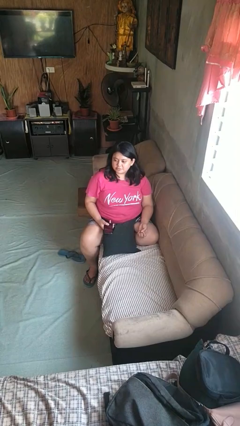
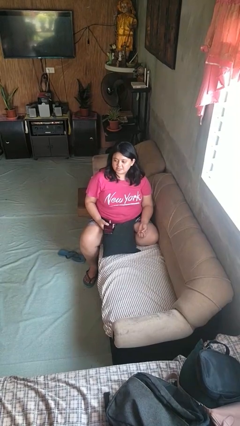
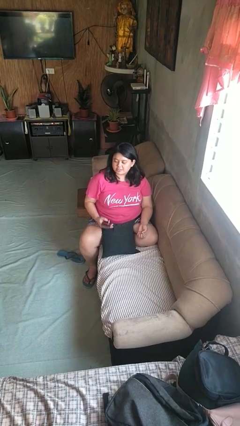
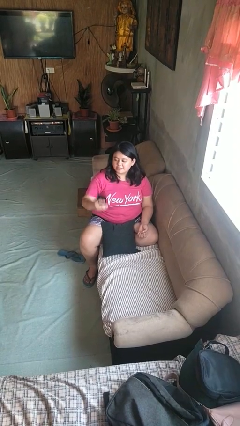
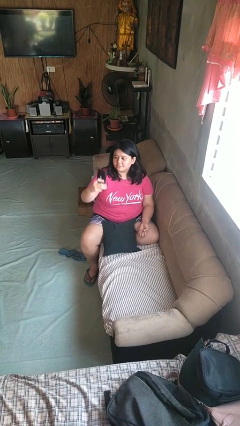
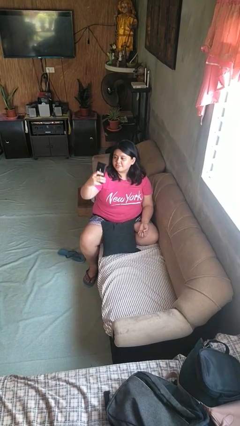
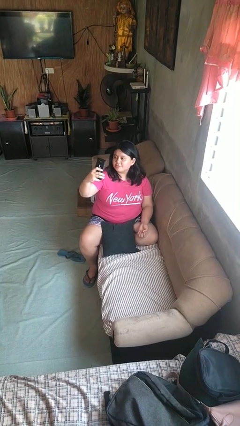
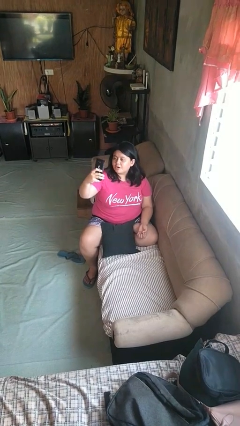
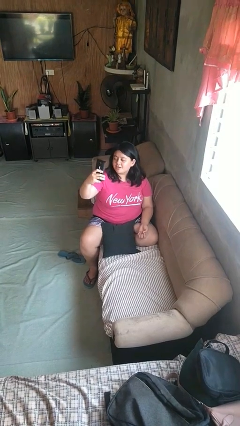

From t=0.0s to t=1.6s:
person takes selfie

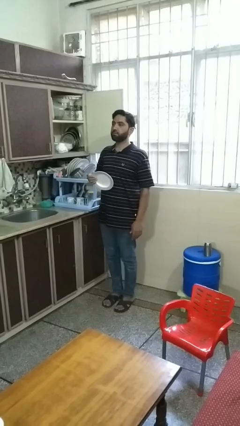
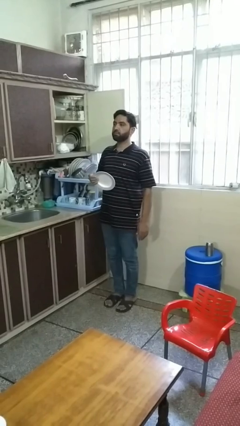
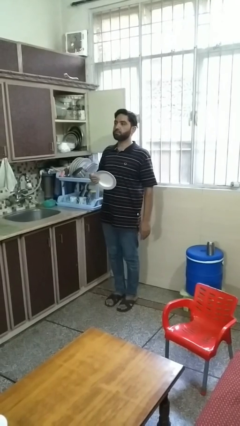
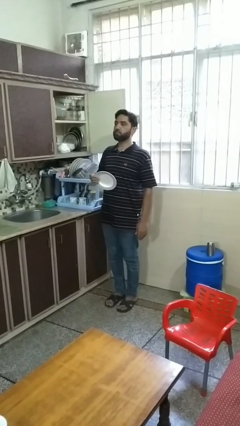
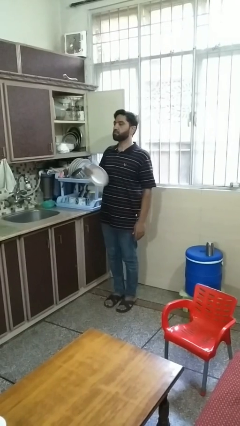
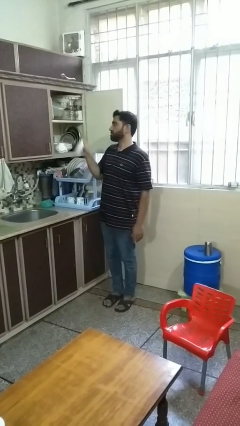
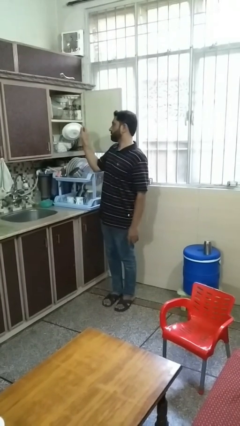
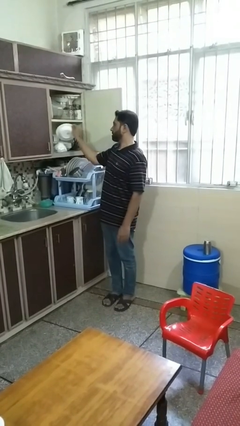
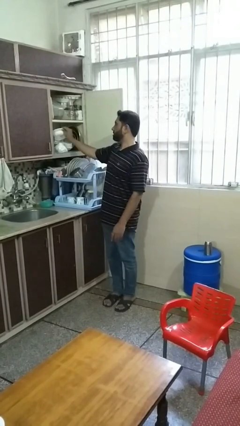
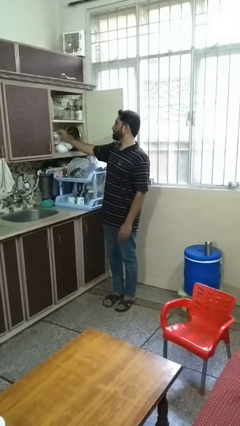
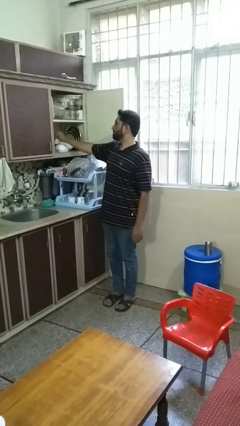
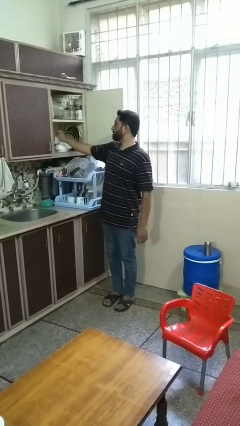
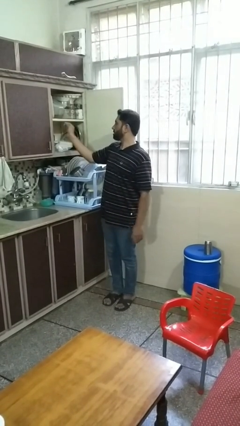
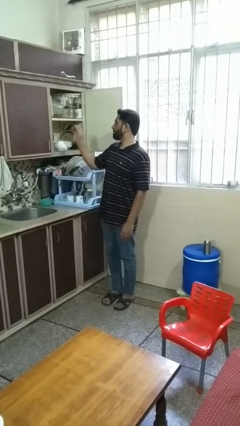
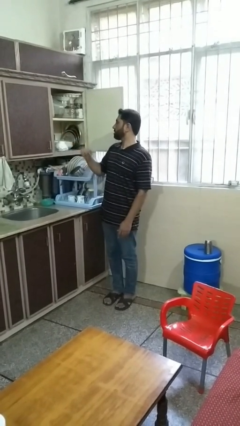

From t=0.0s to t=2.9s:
person puts object in cabinet

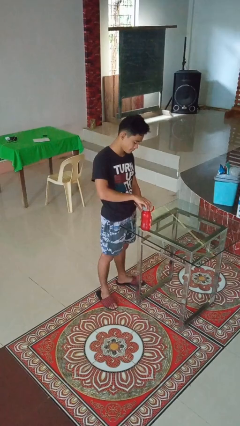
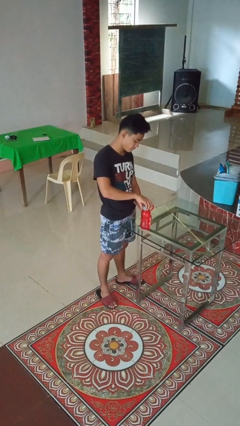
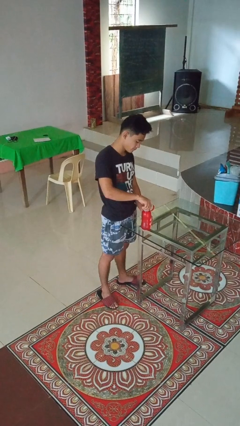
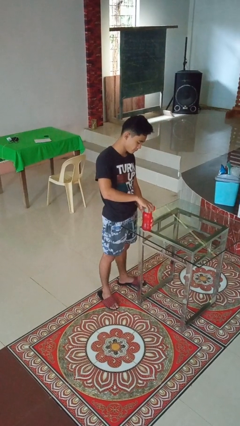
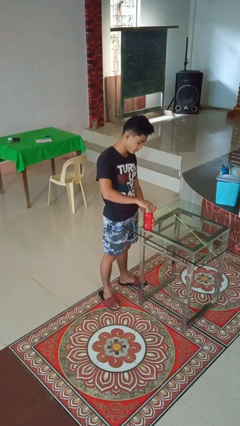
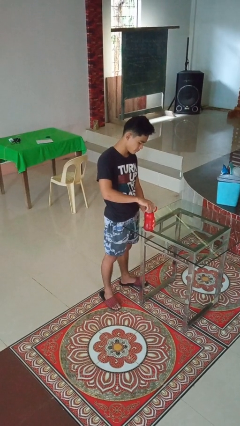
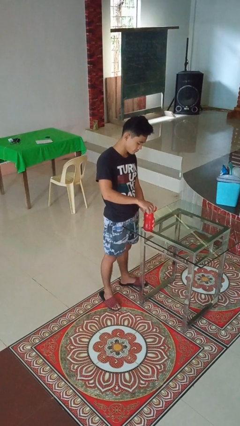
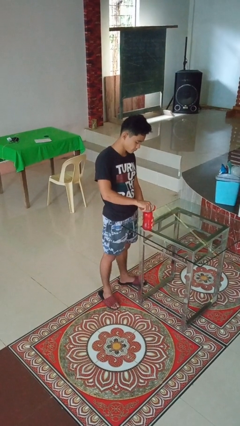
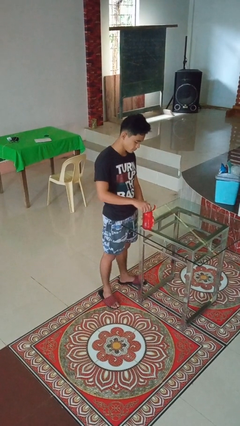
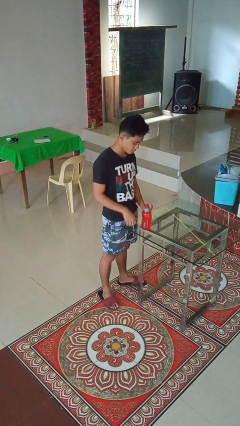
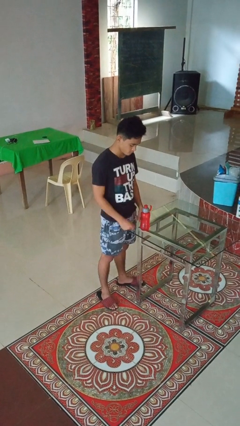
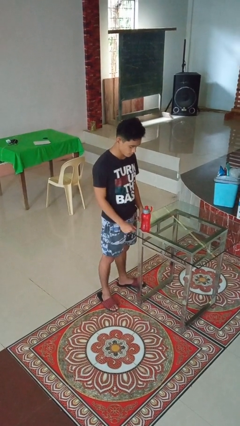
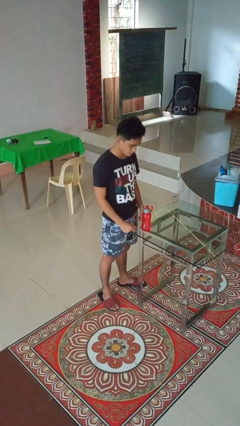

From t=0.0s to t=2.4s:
person screws lid to bottle

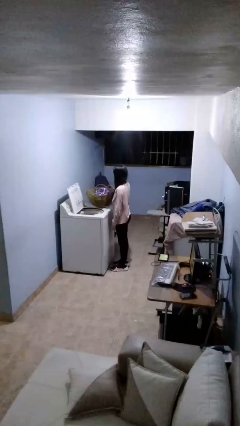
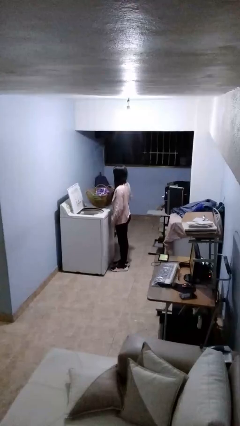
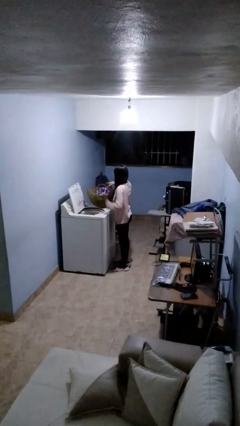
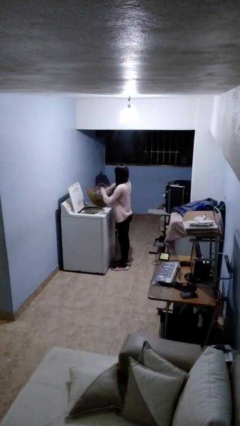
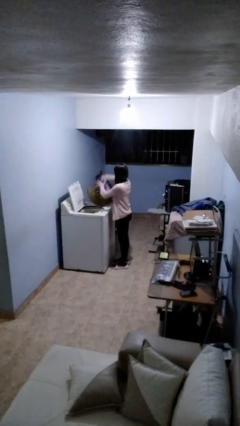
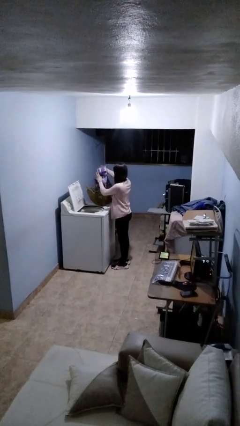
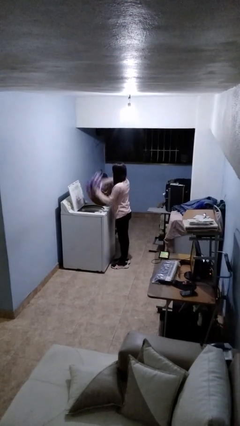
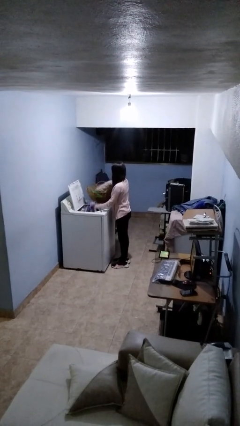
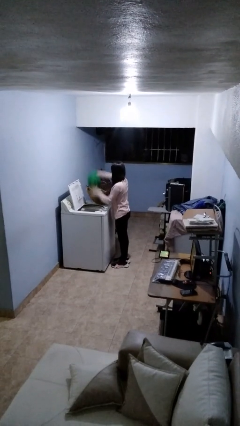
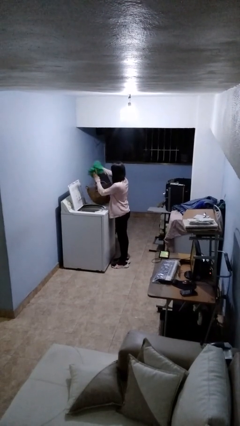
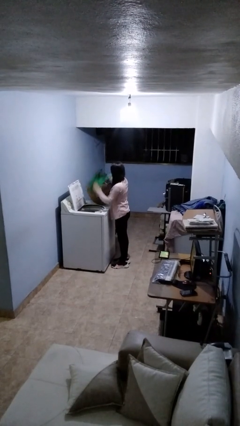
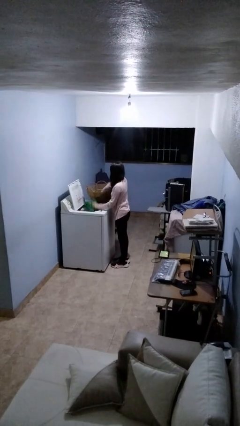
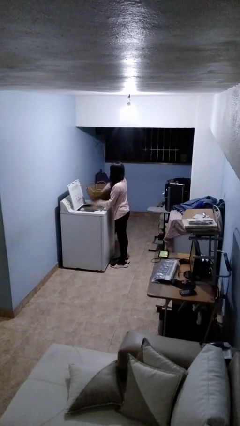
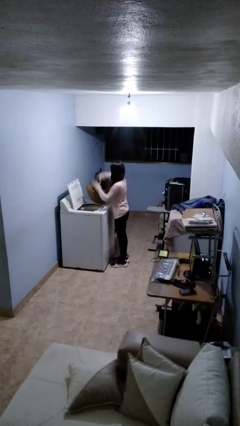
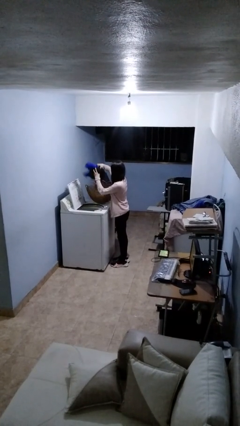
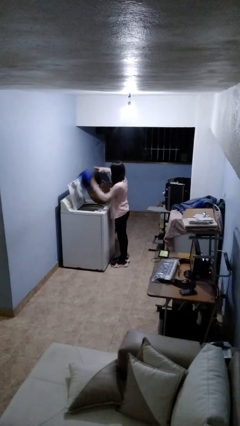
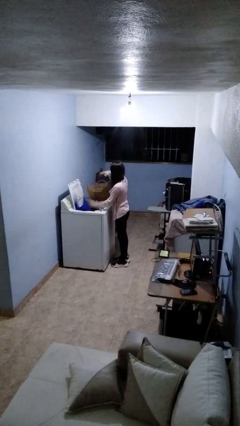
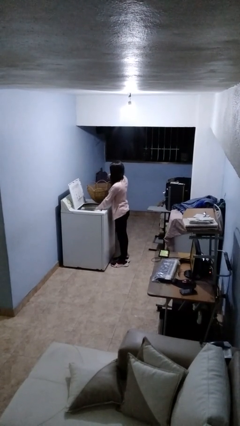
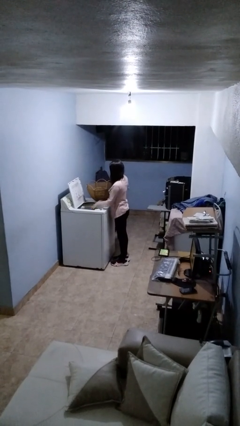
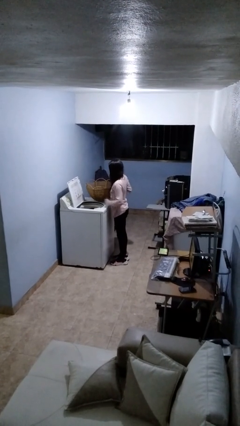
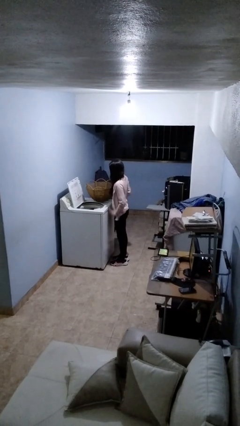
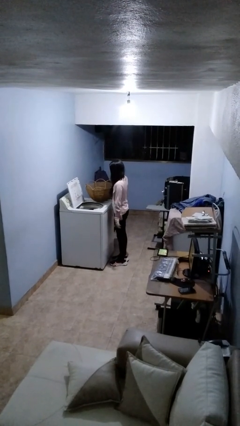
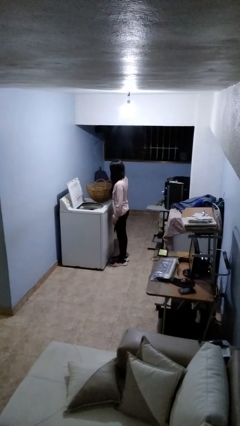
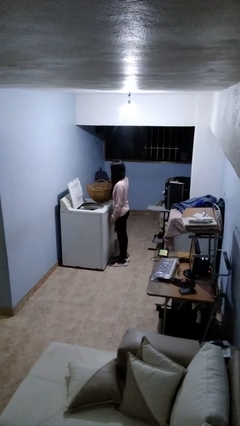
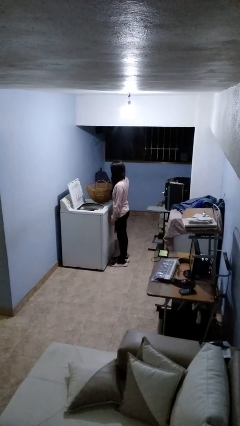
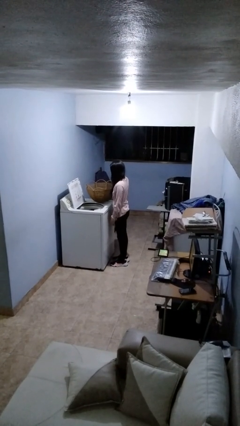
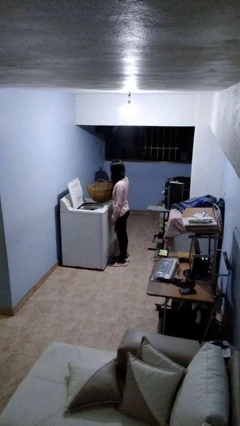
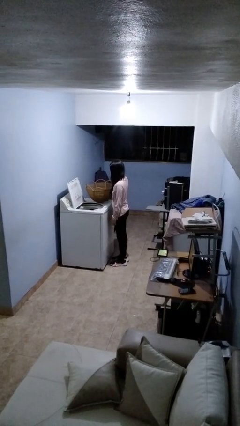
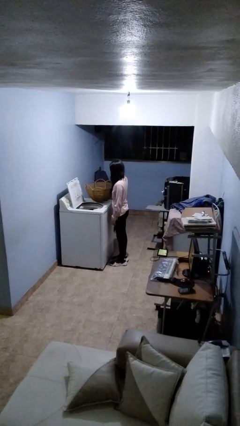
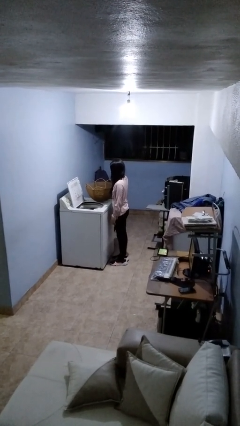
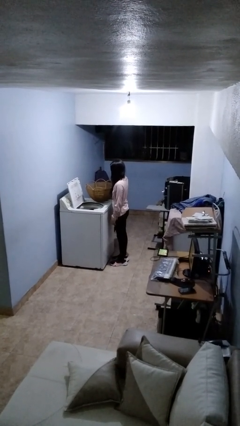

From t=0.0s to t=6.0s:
person unloads clotheswasher

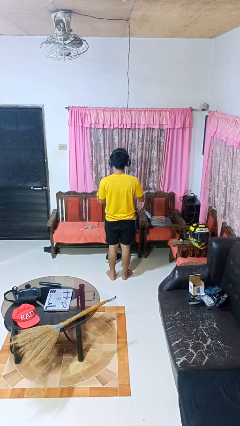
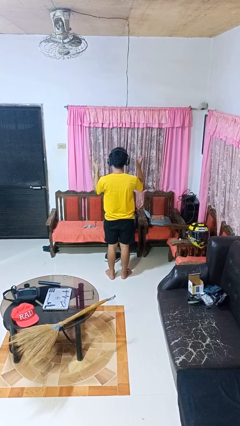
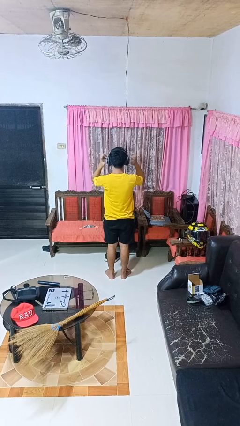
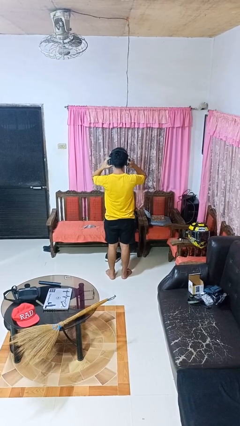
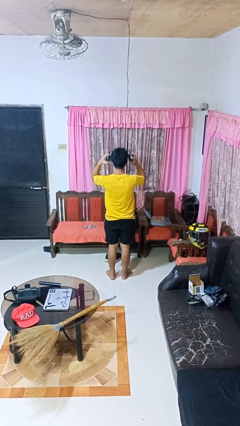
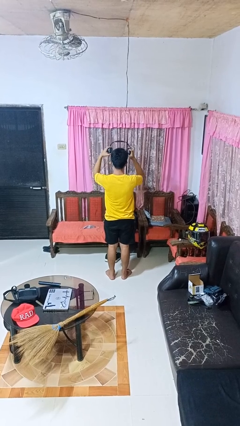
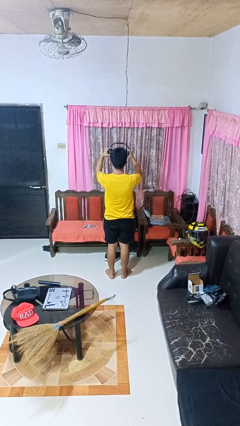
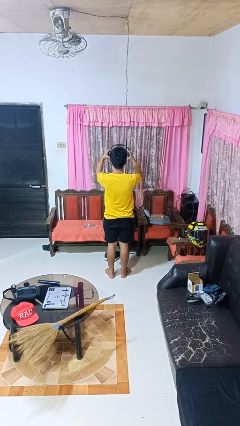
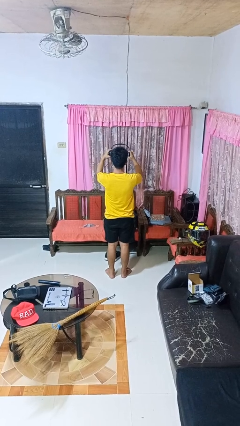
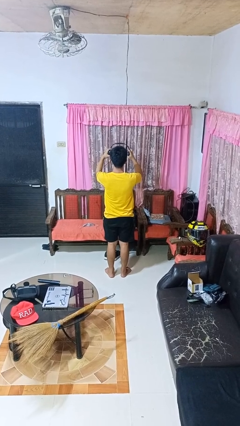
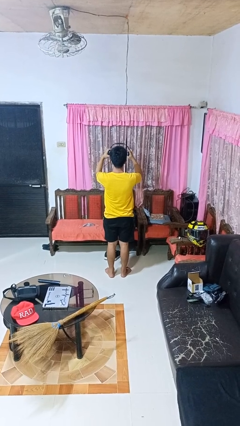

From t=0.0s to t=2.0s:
person takes off headphones

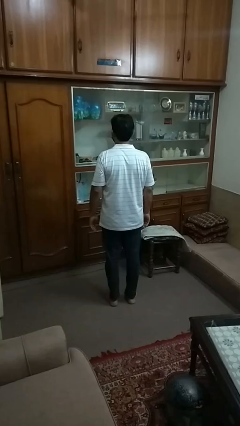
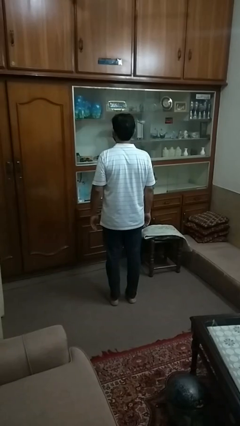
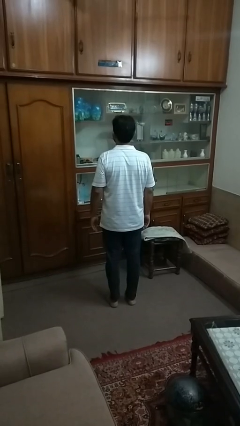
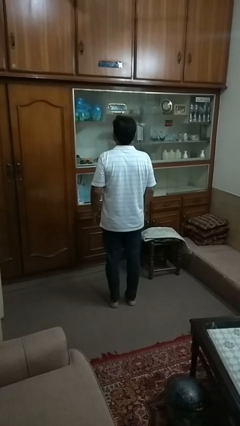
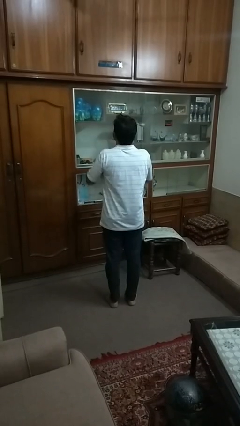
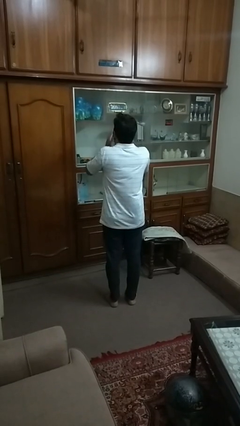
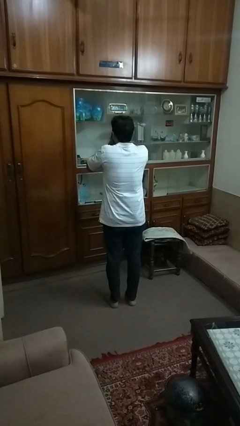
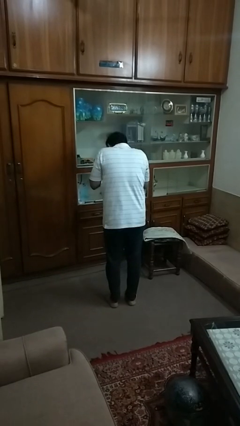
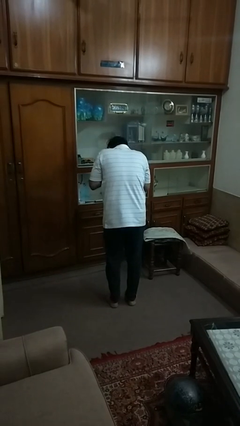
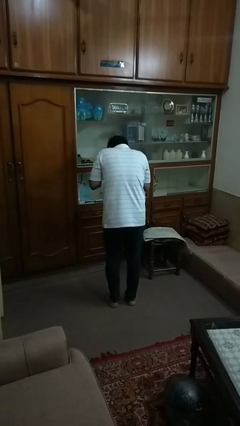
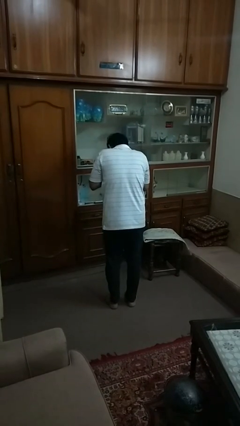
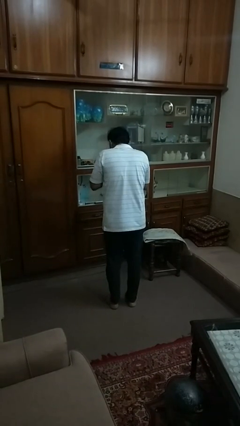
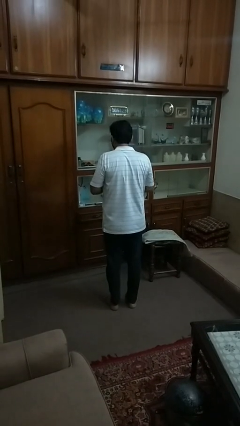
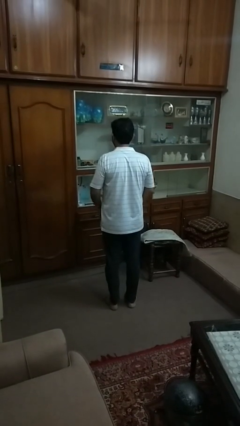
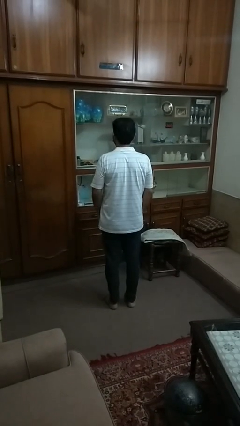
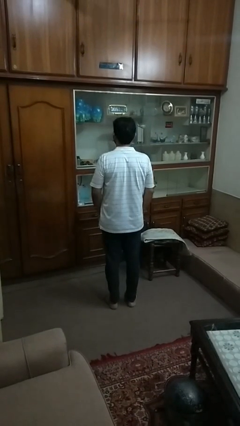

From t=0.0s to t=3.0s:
person sneezes into hand
